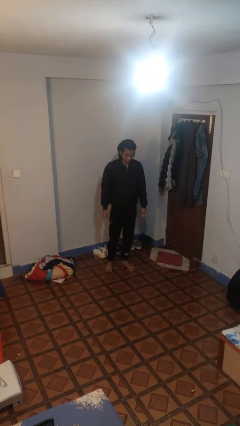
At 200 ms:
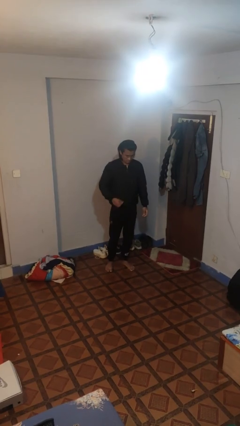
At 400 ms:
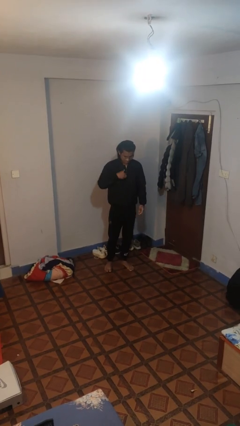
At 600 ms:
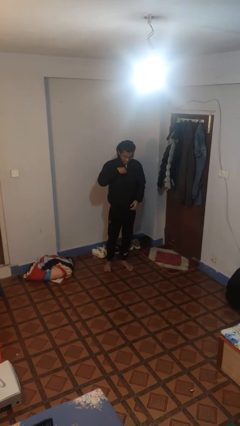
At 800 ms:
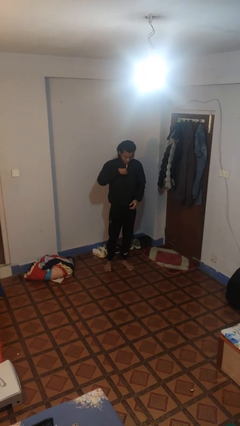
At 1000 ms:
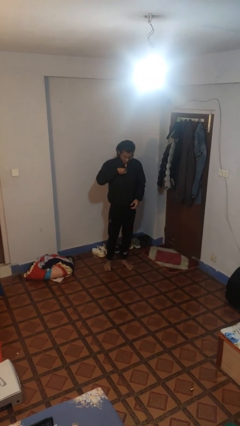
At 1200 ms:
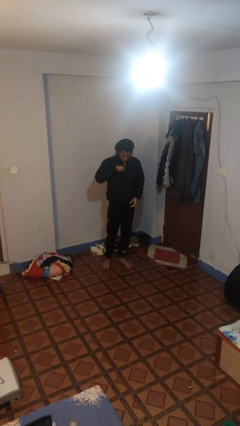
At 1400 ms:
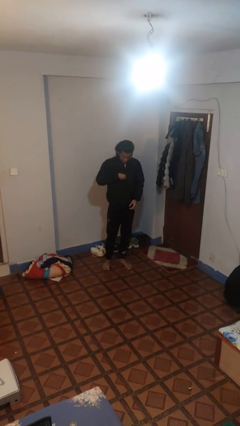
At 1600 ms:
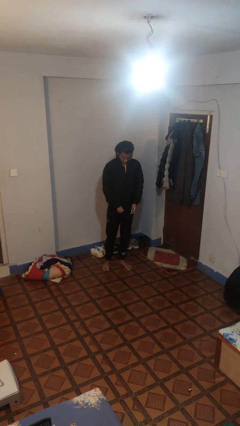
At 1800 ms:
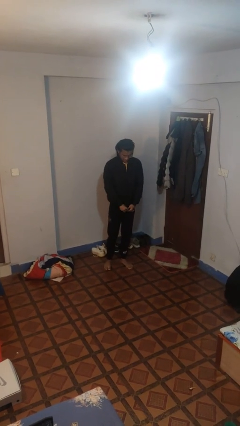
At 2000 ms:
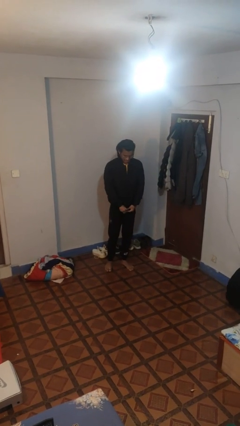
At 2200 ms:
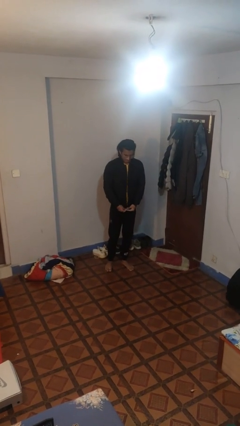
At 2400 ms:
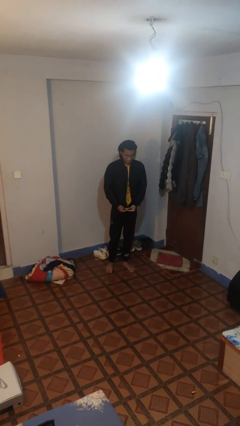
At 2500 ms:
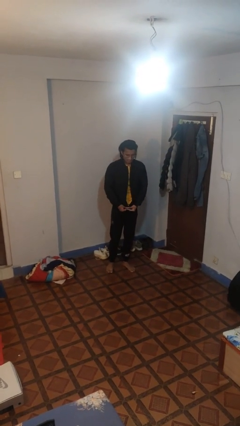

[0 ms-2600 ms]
person unzips jacket

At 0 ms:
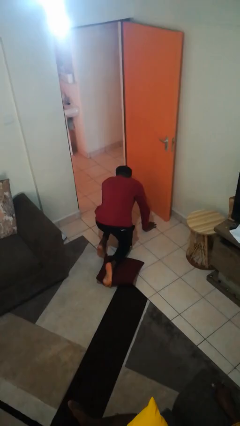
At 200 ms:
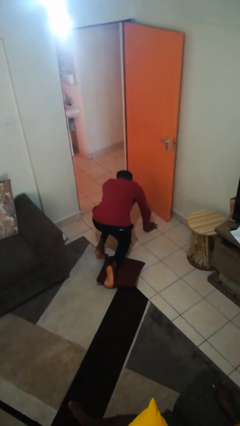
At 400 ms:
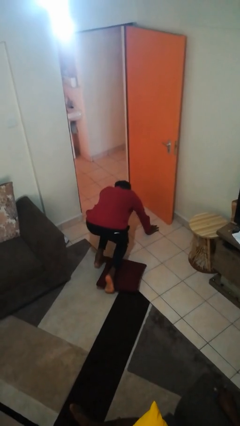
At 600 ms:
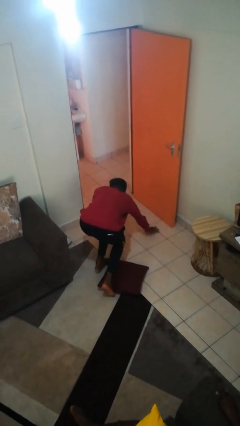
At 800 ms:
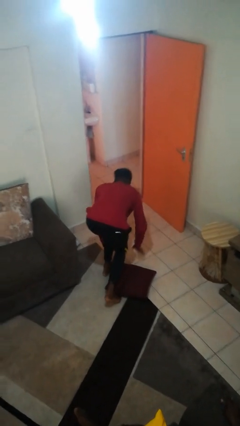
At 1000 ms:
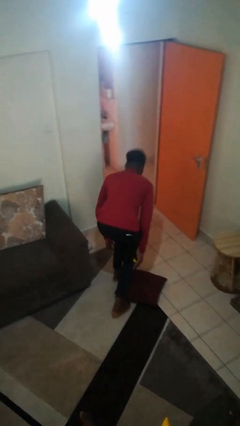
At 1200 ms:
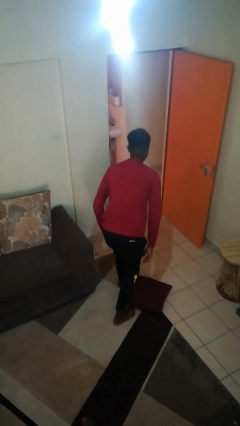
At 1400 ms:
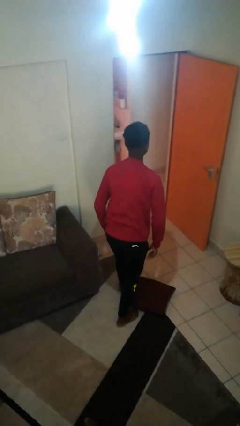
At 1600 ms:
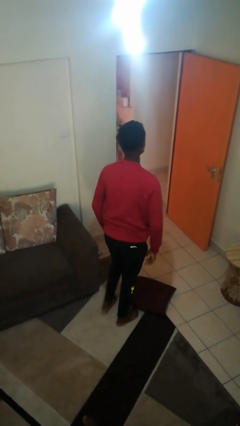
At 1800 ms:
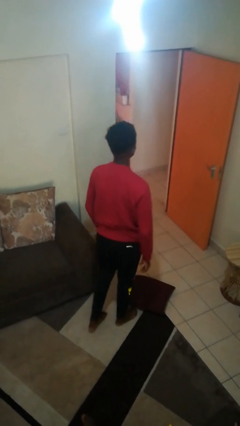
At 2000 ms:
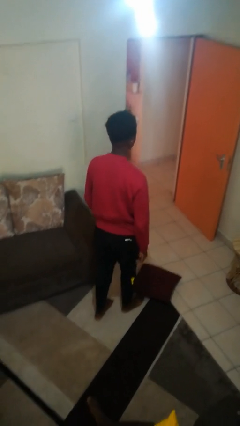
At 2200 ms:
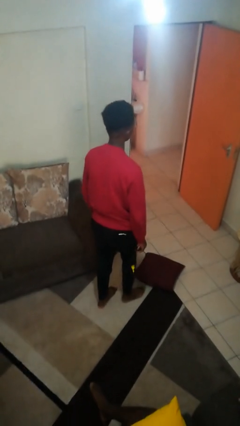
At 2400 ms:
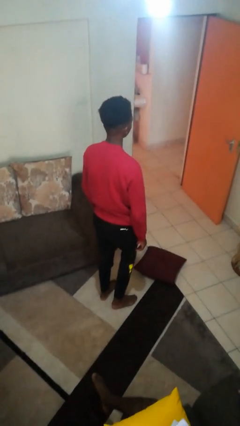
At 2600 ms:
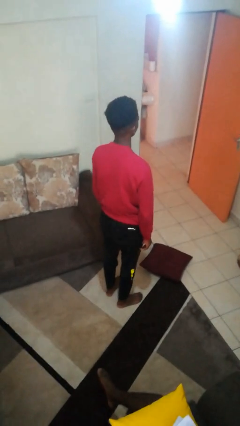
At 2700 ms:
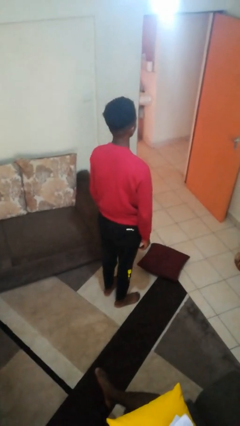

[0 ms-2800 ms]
person stands up from floor

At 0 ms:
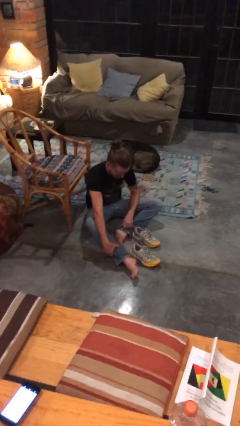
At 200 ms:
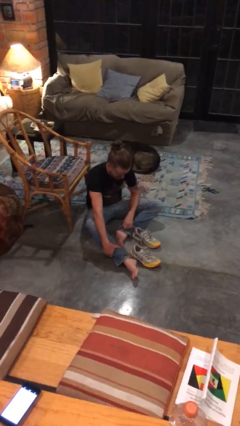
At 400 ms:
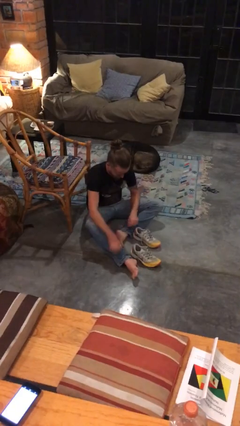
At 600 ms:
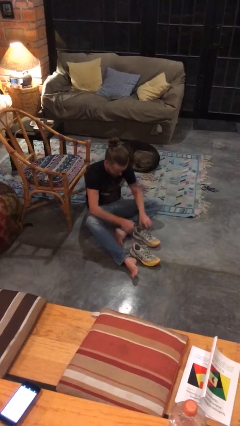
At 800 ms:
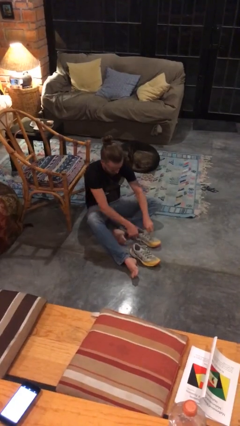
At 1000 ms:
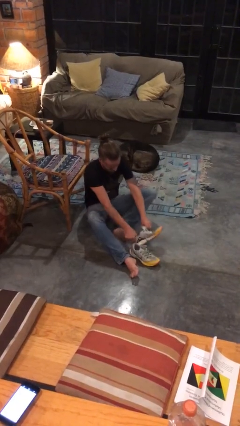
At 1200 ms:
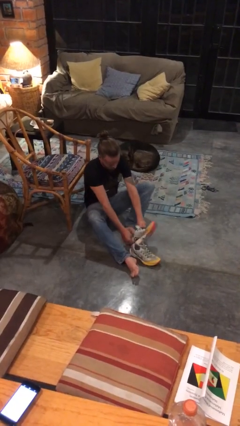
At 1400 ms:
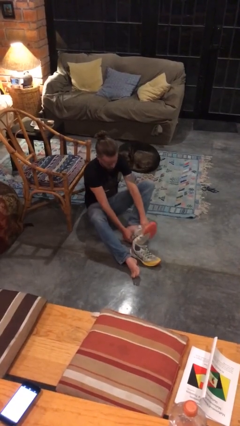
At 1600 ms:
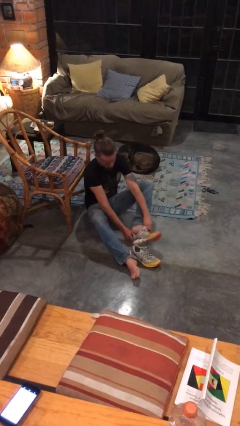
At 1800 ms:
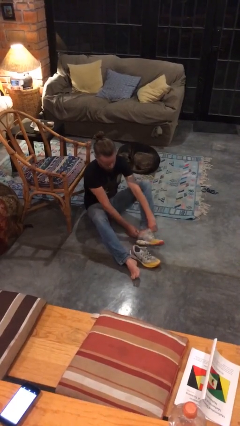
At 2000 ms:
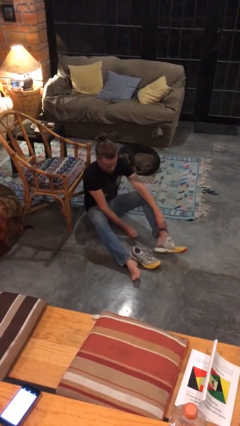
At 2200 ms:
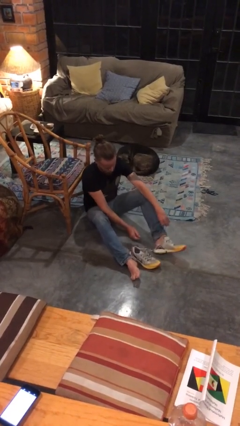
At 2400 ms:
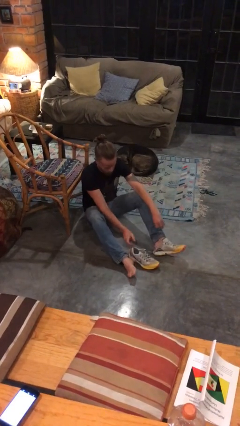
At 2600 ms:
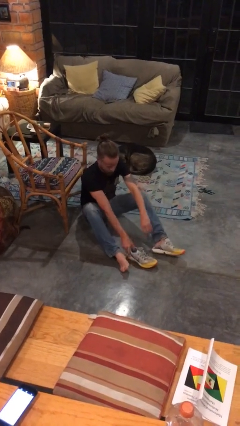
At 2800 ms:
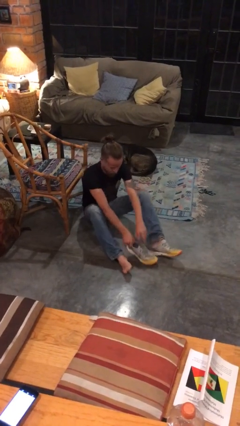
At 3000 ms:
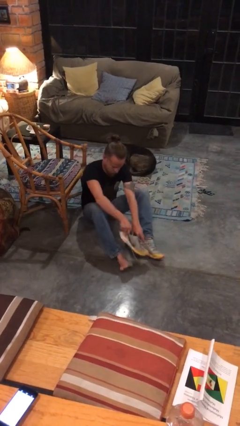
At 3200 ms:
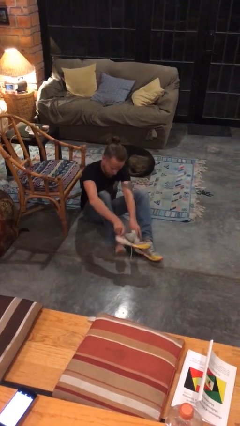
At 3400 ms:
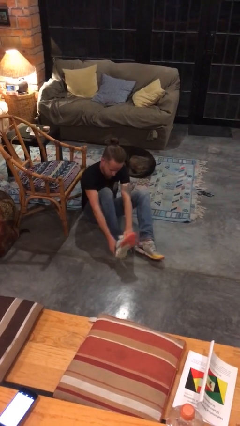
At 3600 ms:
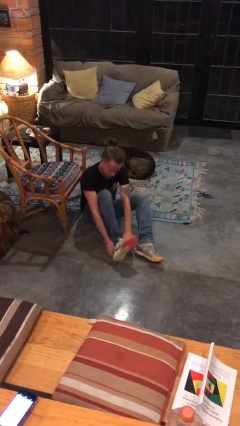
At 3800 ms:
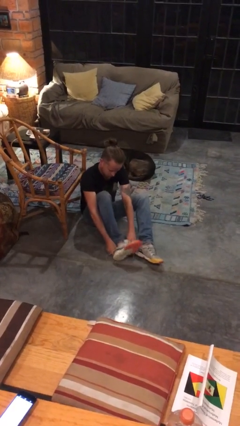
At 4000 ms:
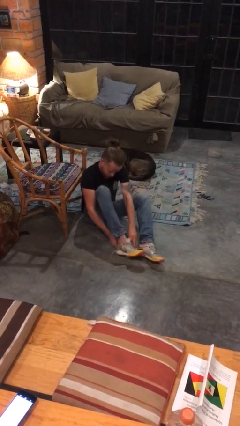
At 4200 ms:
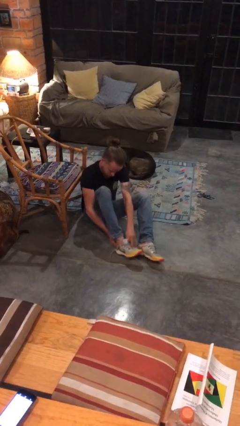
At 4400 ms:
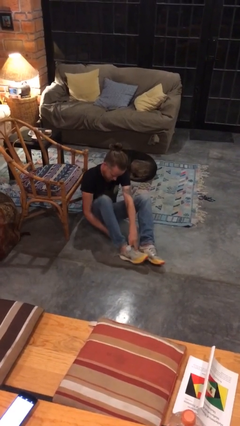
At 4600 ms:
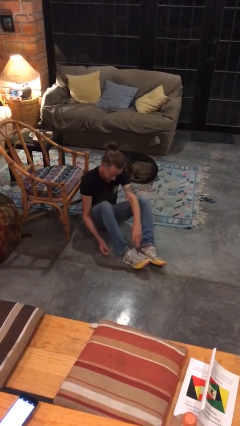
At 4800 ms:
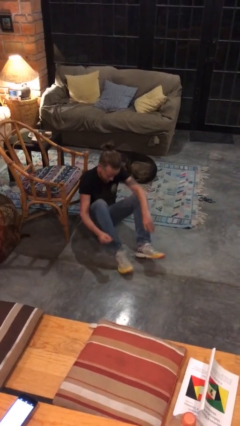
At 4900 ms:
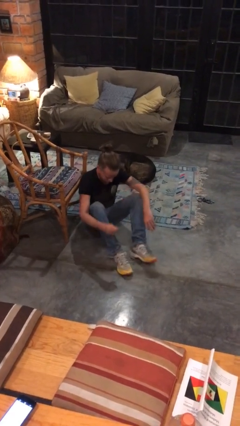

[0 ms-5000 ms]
person puts on shoes

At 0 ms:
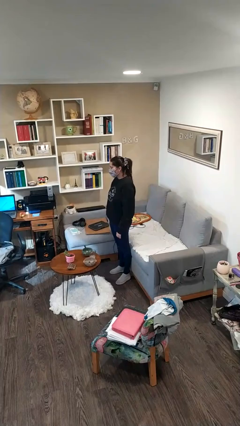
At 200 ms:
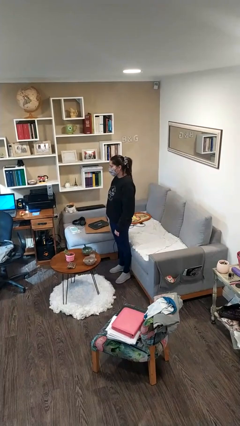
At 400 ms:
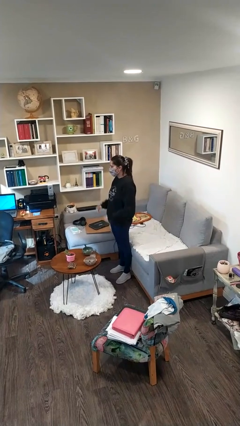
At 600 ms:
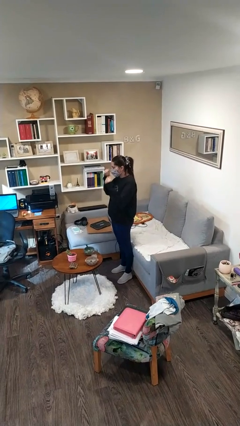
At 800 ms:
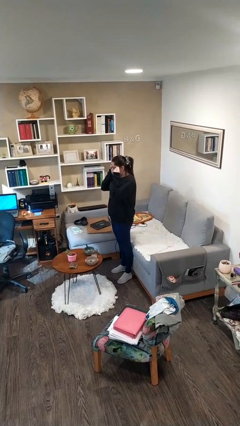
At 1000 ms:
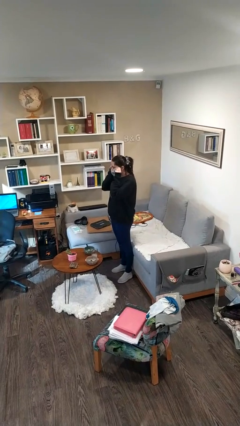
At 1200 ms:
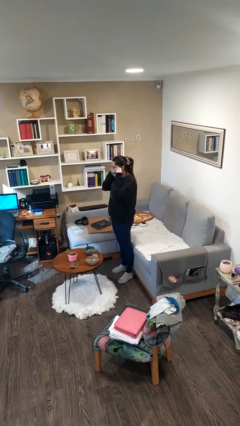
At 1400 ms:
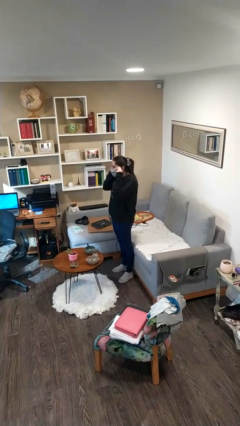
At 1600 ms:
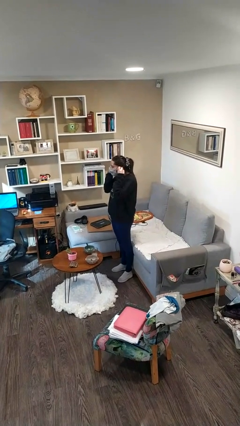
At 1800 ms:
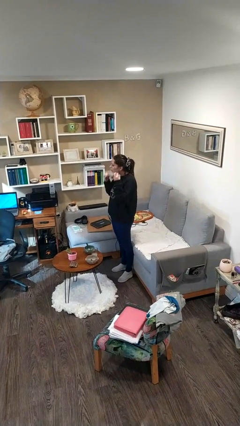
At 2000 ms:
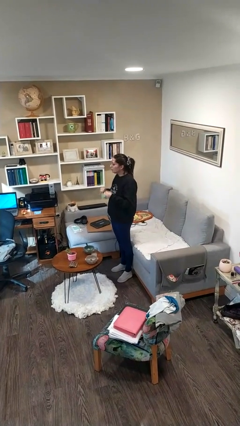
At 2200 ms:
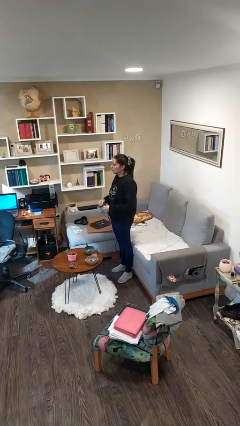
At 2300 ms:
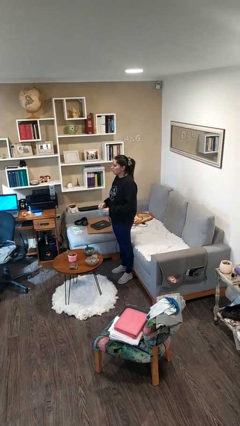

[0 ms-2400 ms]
person takes off facemask

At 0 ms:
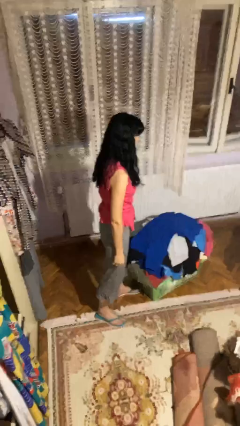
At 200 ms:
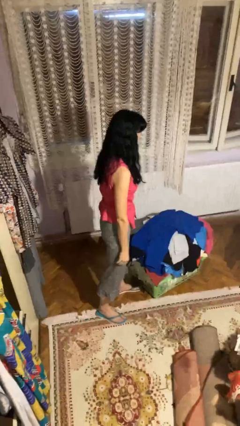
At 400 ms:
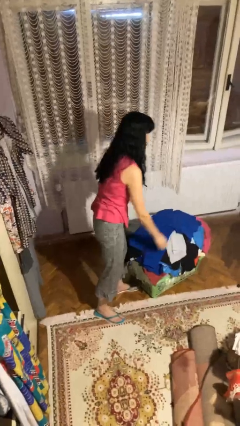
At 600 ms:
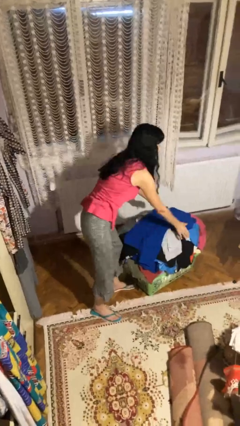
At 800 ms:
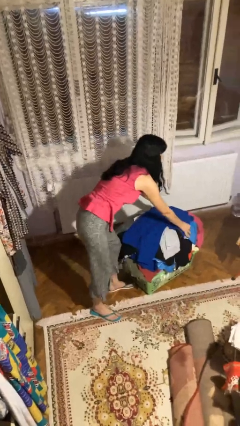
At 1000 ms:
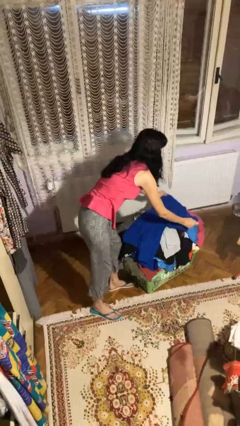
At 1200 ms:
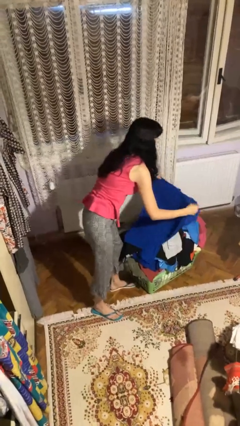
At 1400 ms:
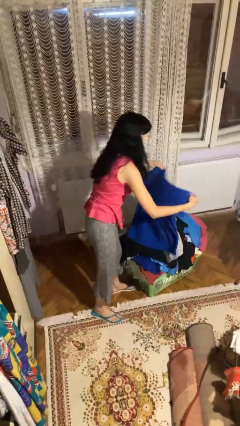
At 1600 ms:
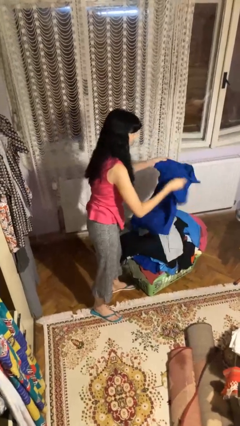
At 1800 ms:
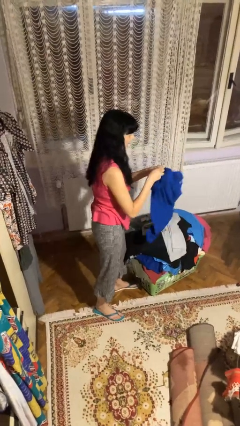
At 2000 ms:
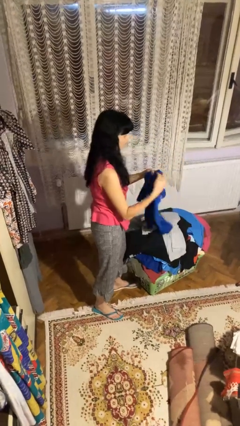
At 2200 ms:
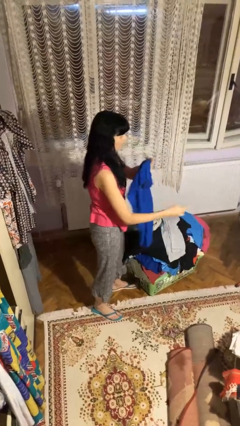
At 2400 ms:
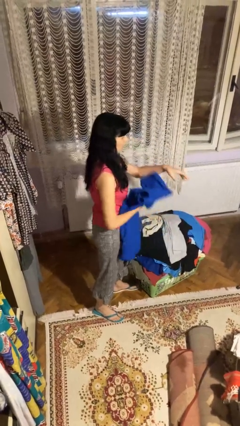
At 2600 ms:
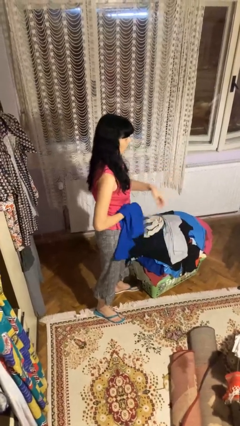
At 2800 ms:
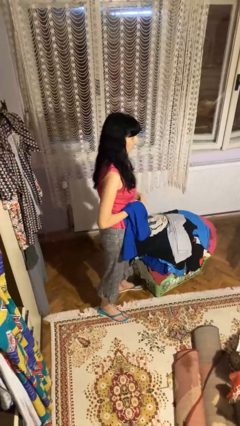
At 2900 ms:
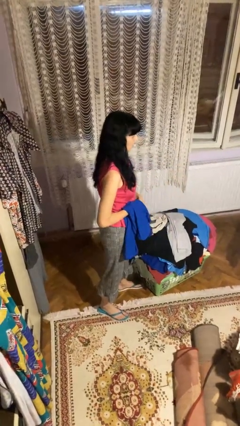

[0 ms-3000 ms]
person folds shirt

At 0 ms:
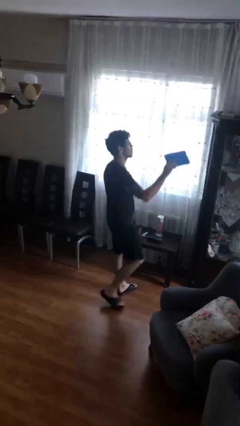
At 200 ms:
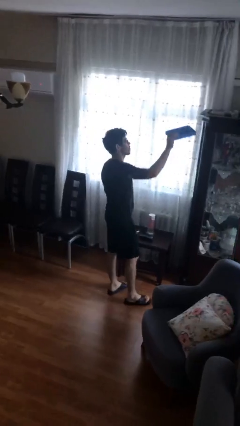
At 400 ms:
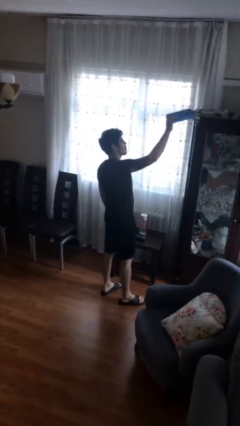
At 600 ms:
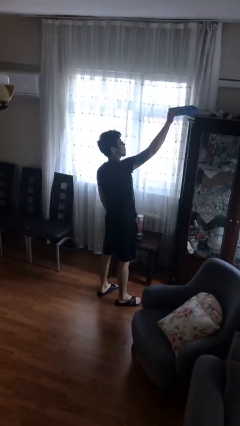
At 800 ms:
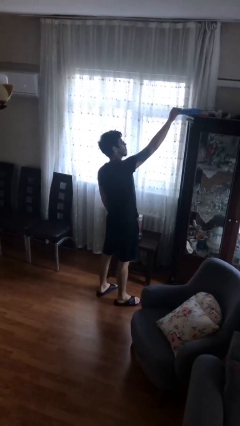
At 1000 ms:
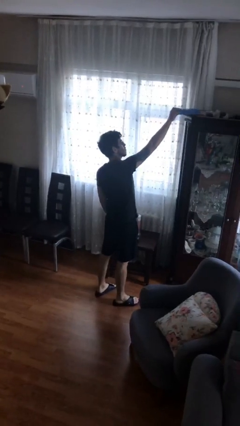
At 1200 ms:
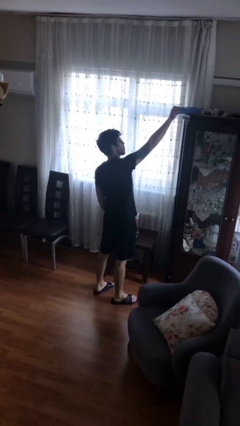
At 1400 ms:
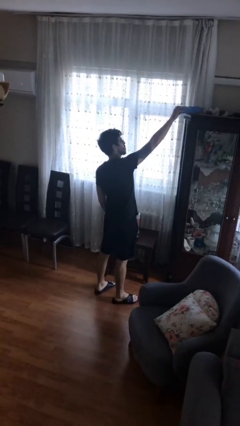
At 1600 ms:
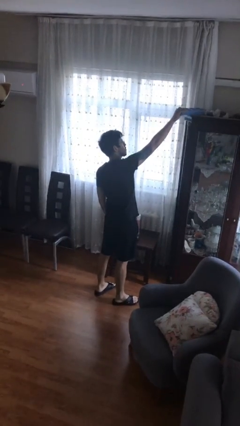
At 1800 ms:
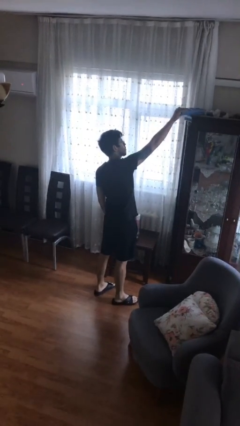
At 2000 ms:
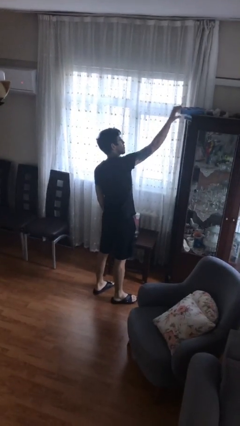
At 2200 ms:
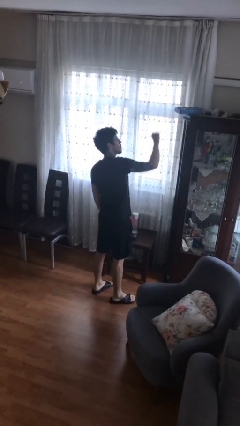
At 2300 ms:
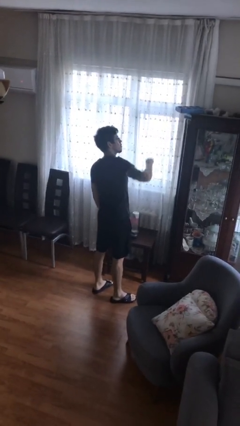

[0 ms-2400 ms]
person puts down object on shelf
